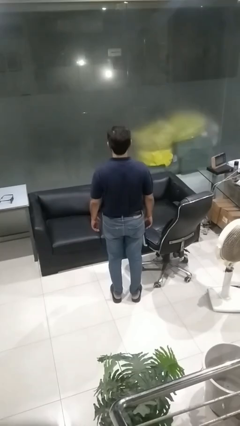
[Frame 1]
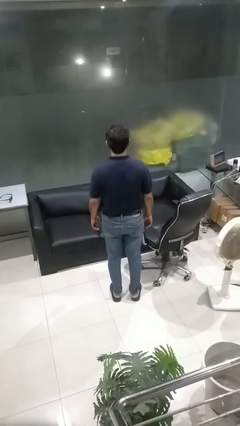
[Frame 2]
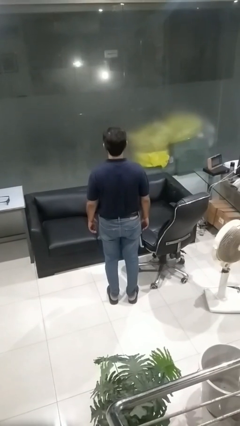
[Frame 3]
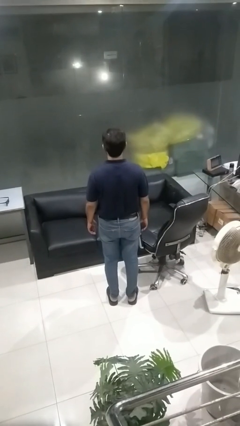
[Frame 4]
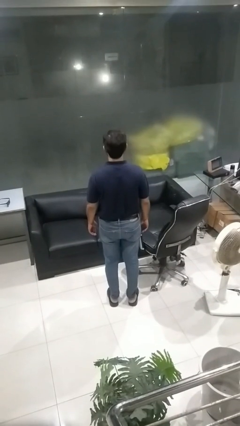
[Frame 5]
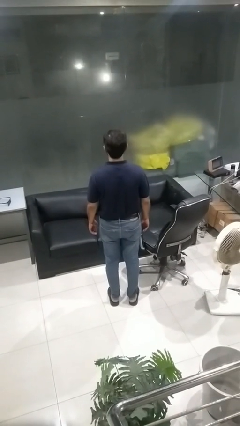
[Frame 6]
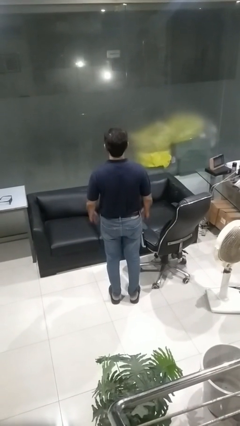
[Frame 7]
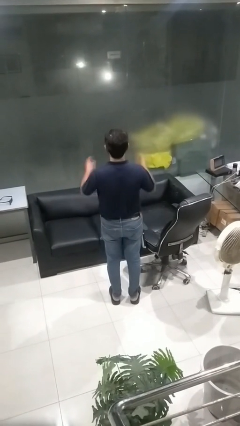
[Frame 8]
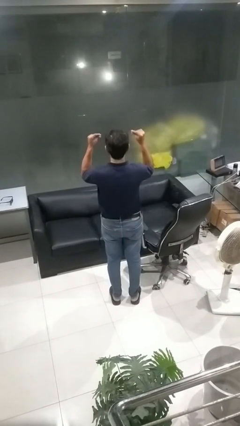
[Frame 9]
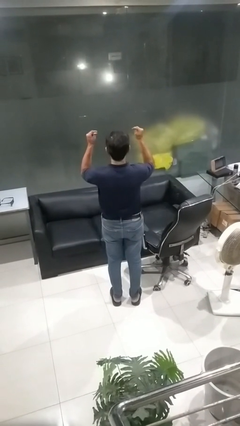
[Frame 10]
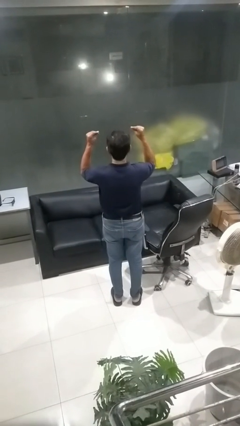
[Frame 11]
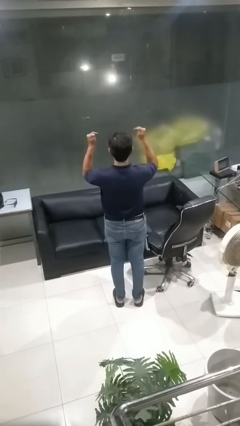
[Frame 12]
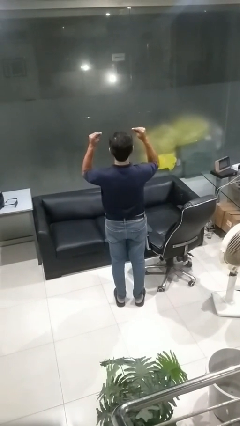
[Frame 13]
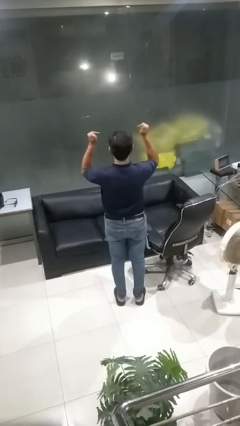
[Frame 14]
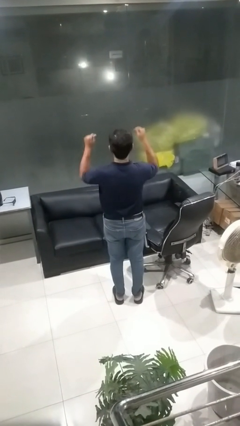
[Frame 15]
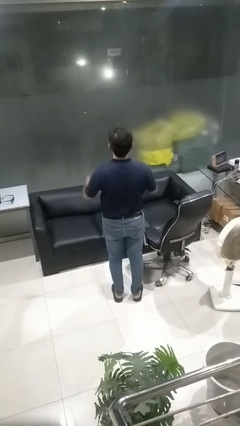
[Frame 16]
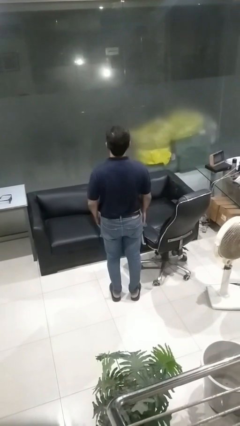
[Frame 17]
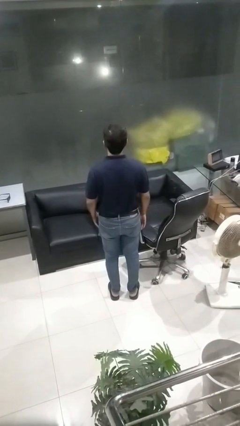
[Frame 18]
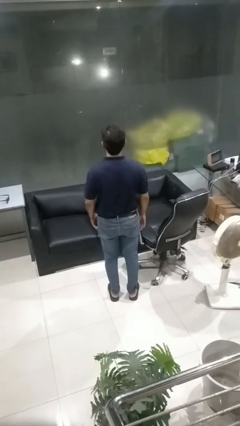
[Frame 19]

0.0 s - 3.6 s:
person snaps fingers

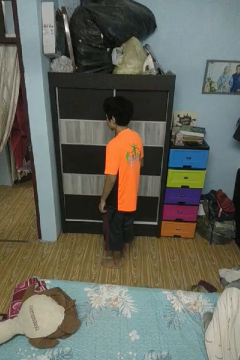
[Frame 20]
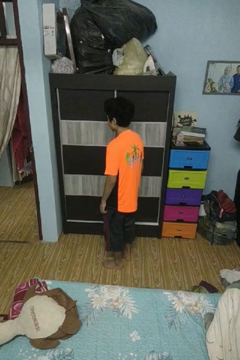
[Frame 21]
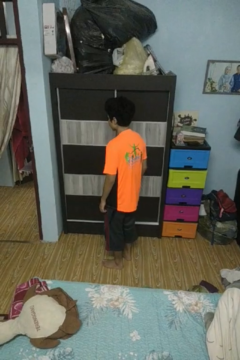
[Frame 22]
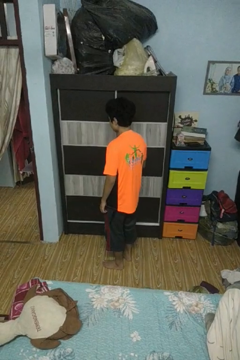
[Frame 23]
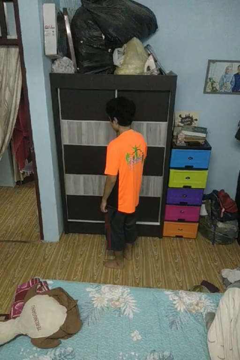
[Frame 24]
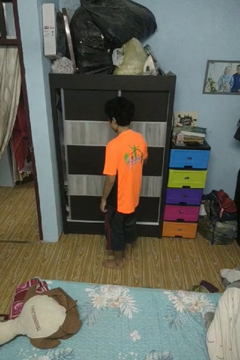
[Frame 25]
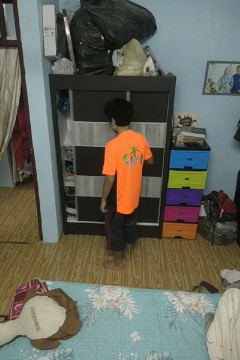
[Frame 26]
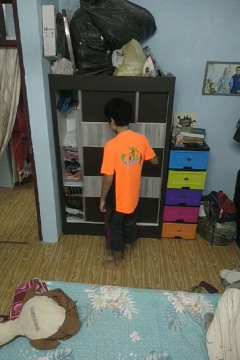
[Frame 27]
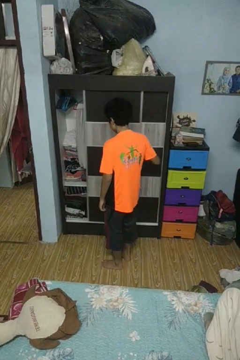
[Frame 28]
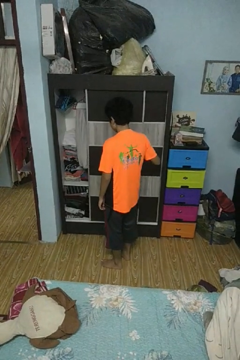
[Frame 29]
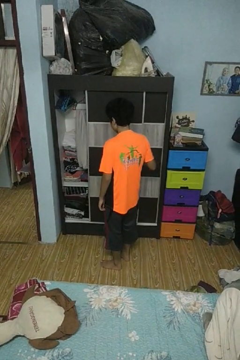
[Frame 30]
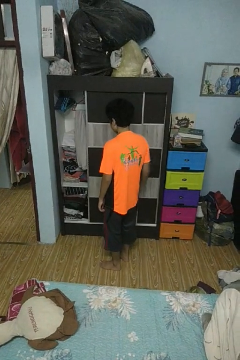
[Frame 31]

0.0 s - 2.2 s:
person opens closet door

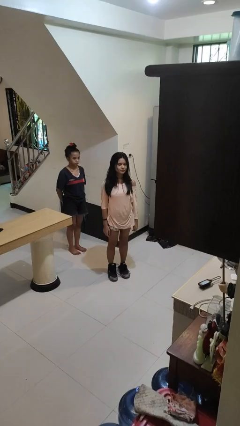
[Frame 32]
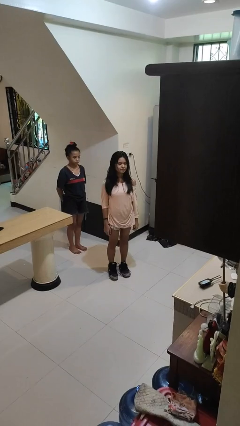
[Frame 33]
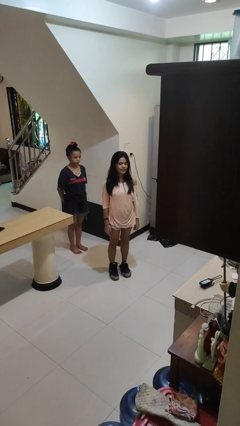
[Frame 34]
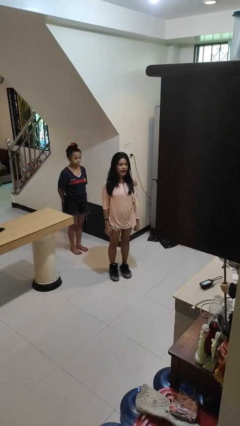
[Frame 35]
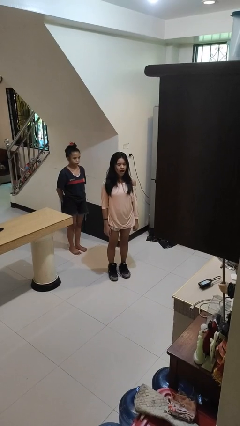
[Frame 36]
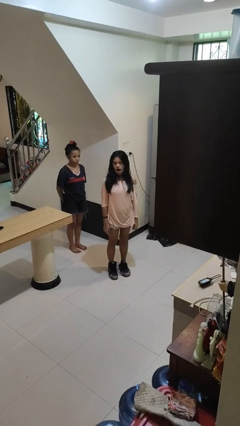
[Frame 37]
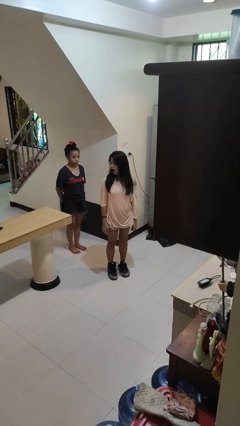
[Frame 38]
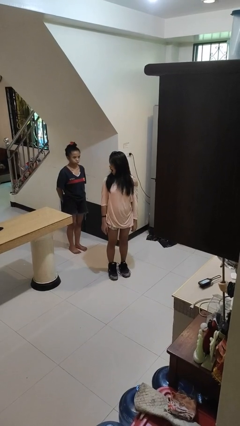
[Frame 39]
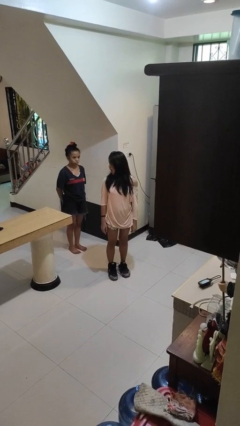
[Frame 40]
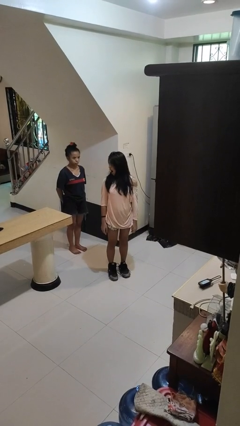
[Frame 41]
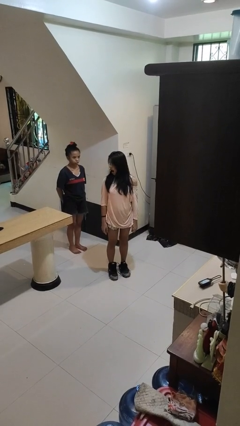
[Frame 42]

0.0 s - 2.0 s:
person looks over shoulder

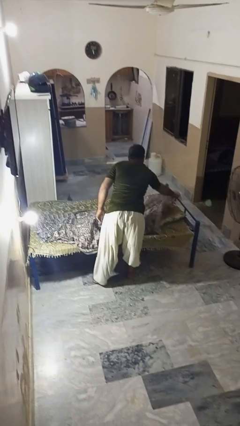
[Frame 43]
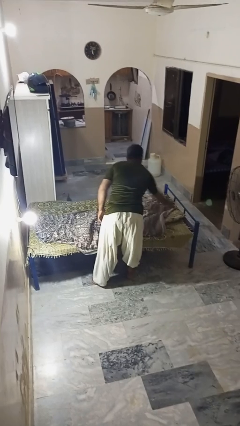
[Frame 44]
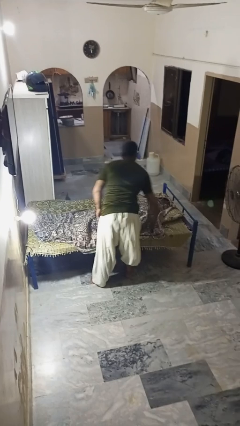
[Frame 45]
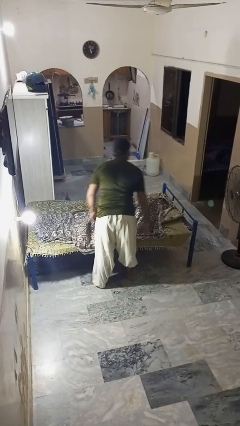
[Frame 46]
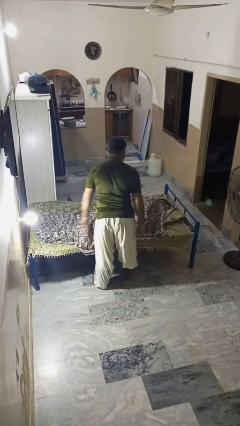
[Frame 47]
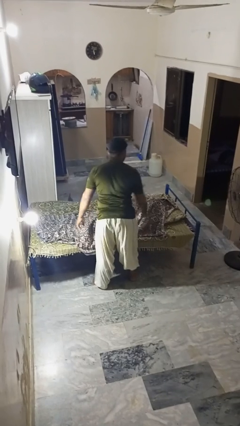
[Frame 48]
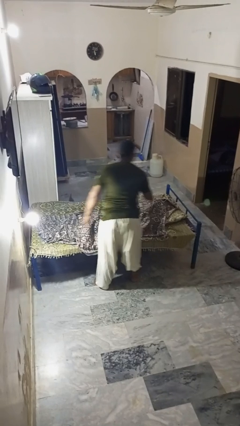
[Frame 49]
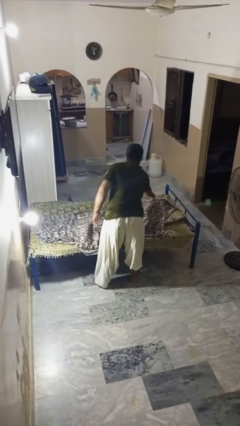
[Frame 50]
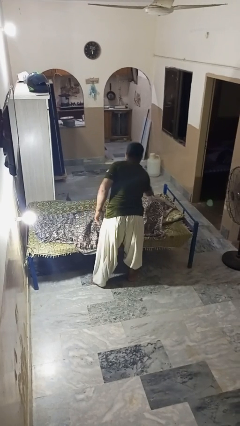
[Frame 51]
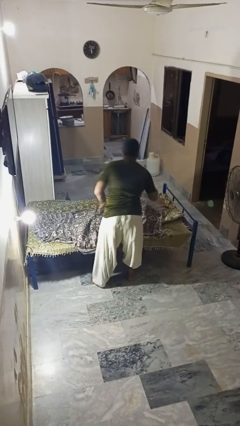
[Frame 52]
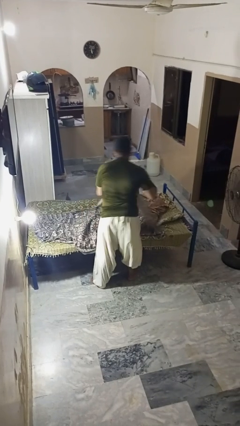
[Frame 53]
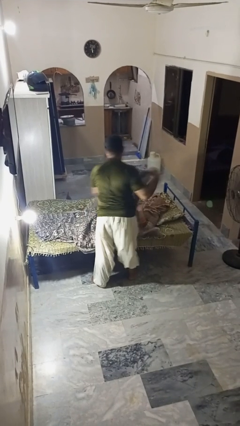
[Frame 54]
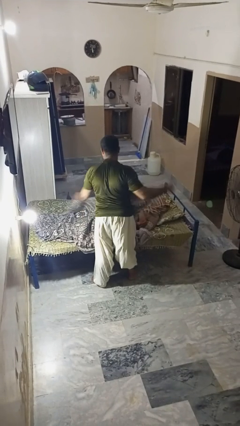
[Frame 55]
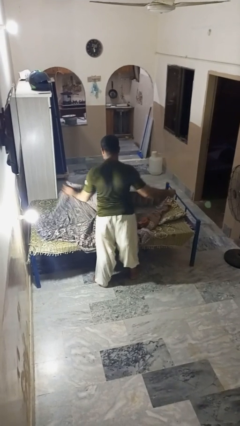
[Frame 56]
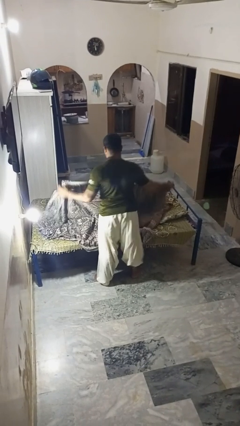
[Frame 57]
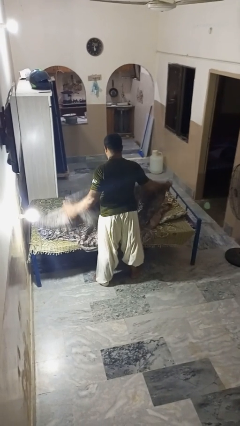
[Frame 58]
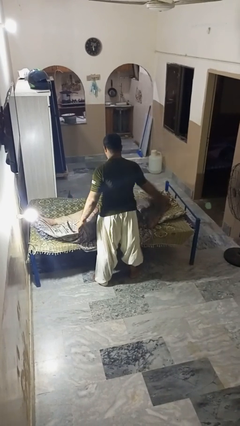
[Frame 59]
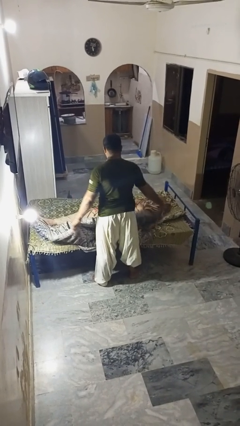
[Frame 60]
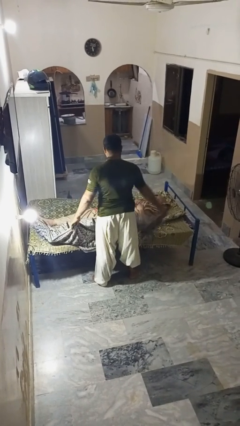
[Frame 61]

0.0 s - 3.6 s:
person uncovers friend with blanket

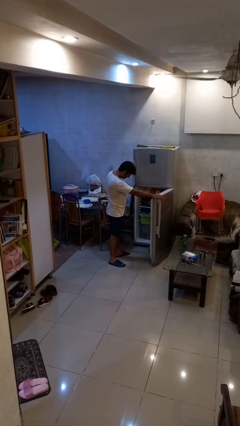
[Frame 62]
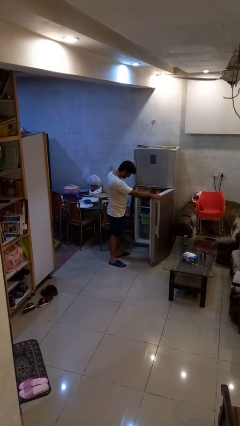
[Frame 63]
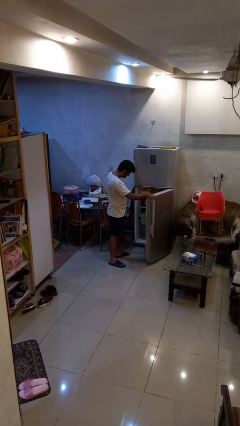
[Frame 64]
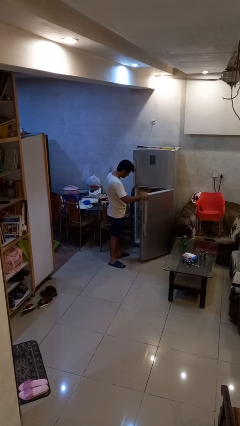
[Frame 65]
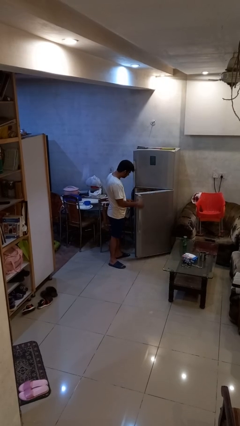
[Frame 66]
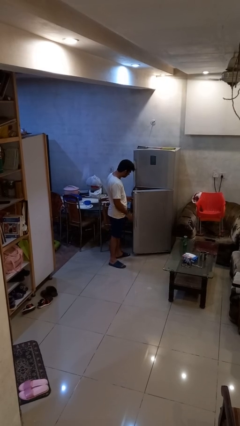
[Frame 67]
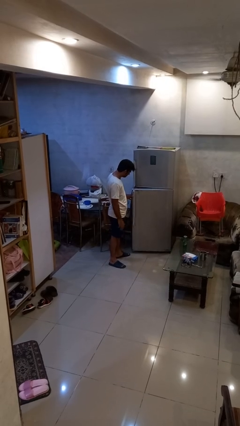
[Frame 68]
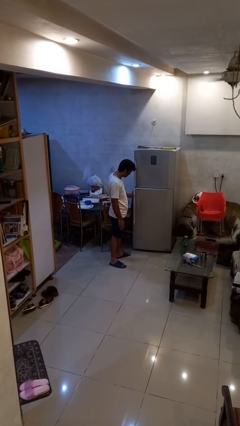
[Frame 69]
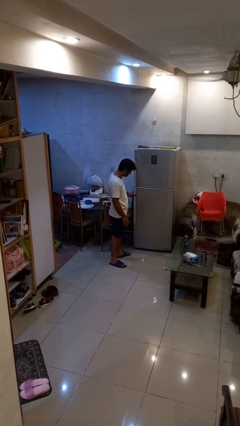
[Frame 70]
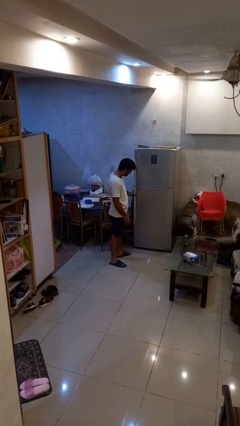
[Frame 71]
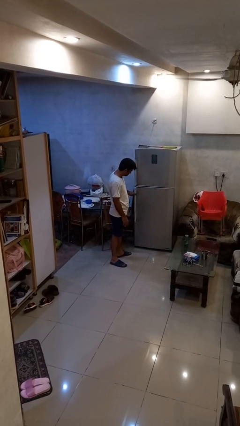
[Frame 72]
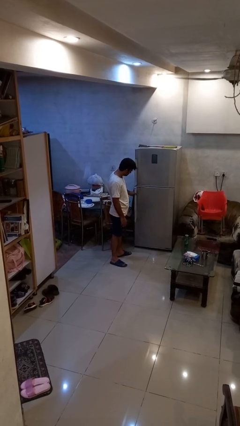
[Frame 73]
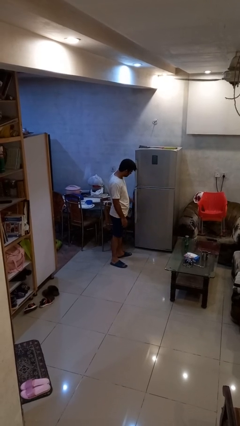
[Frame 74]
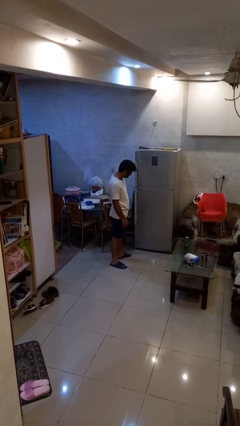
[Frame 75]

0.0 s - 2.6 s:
person closes refrigerator

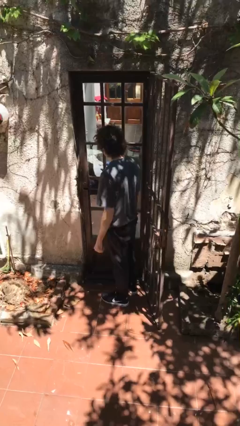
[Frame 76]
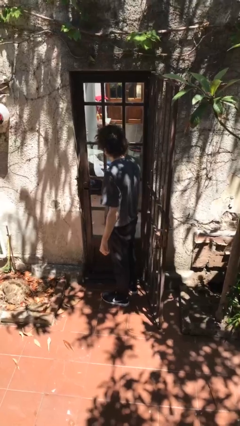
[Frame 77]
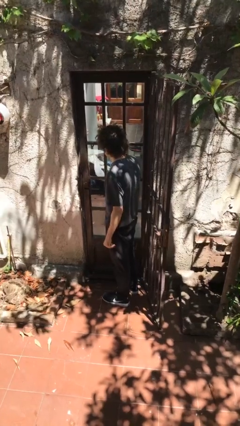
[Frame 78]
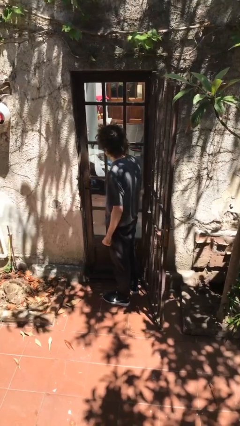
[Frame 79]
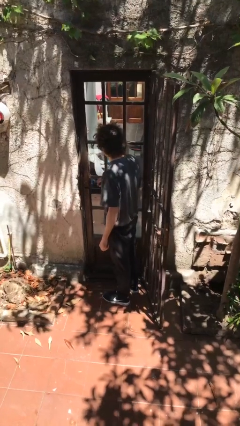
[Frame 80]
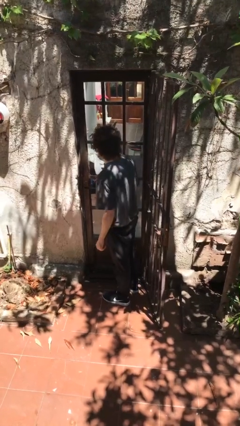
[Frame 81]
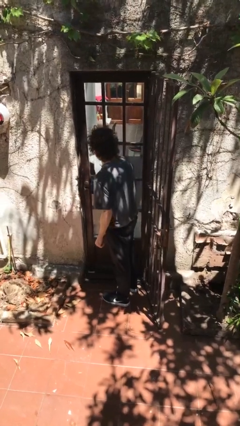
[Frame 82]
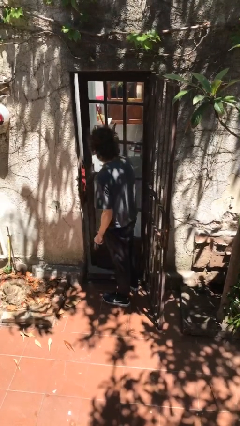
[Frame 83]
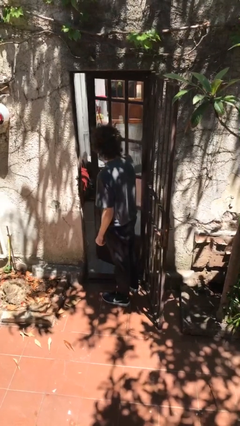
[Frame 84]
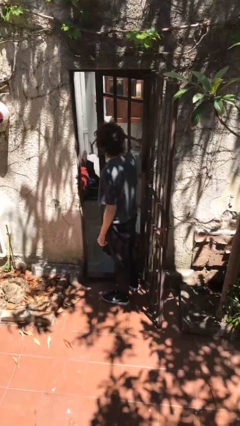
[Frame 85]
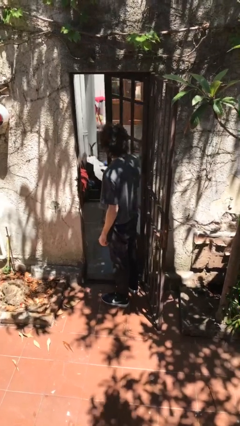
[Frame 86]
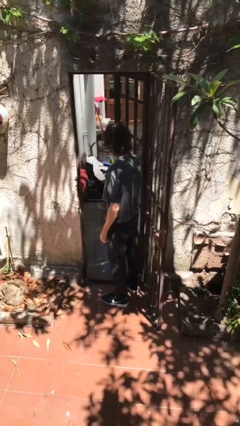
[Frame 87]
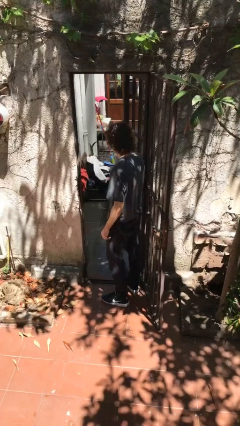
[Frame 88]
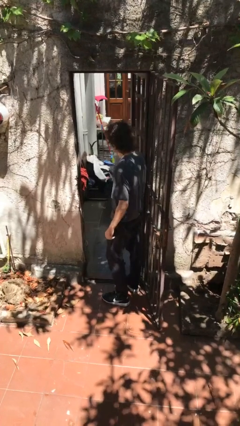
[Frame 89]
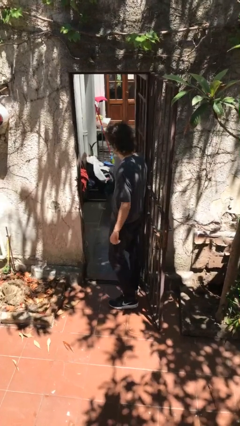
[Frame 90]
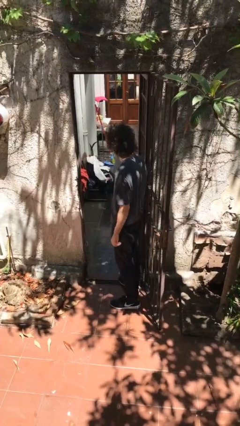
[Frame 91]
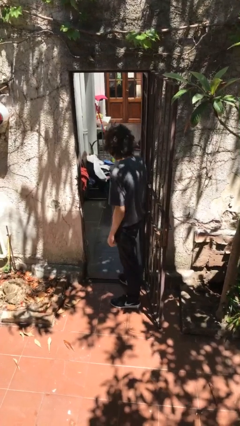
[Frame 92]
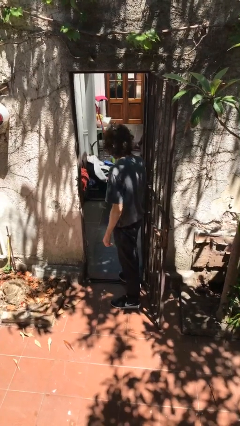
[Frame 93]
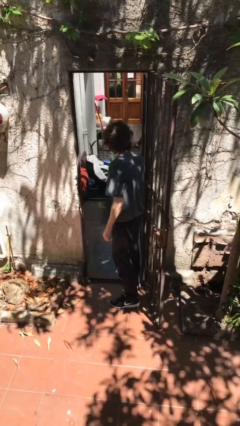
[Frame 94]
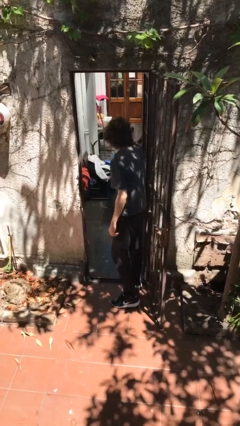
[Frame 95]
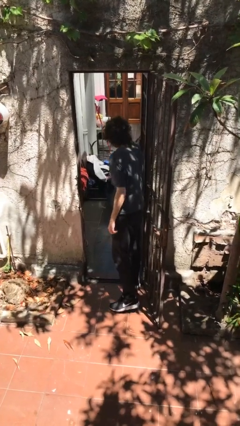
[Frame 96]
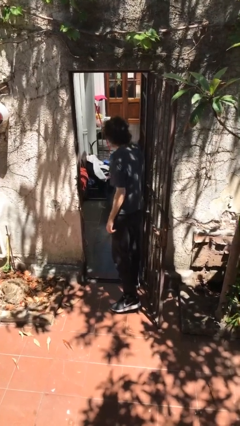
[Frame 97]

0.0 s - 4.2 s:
person opens facility door
